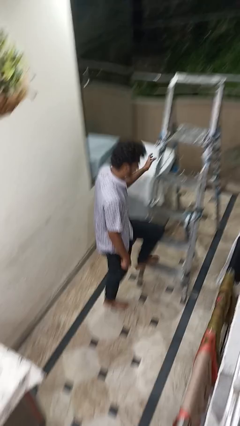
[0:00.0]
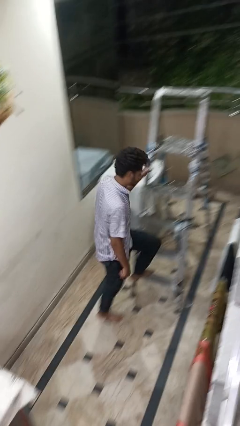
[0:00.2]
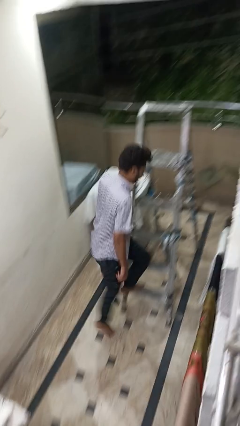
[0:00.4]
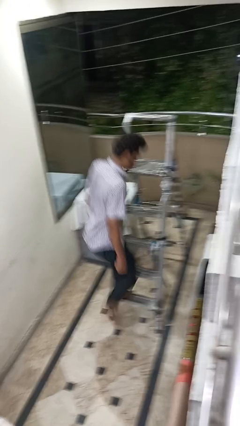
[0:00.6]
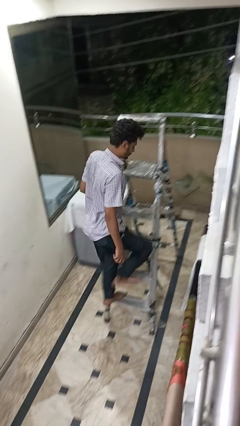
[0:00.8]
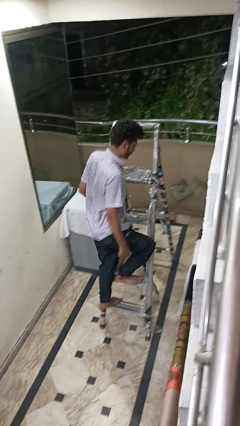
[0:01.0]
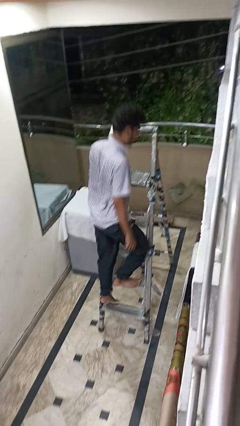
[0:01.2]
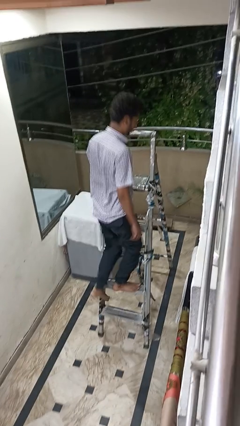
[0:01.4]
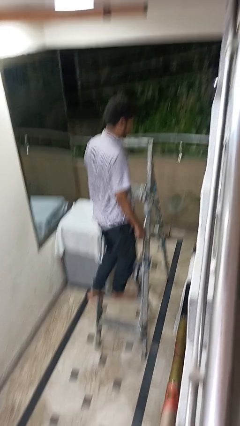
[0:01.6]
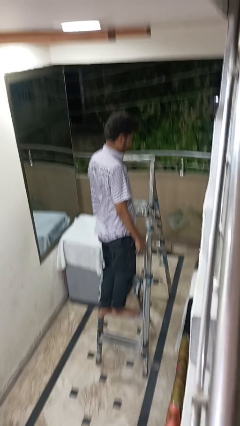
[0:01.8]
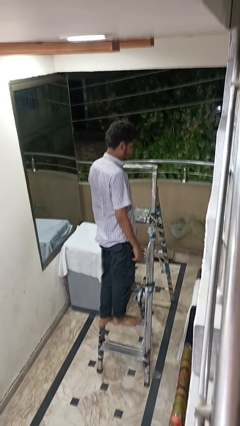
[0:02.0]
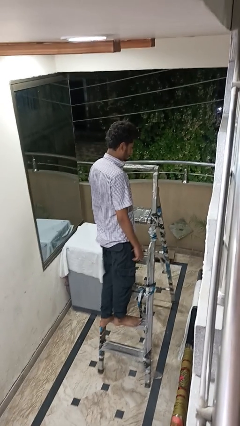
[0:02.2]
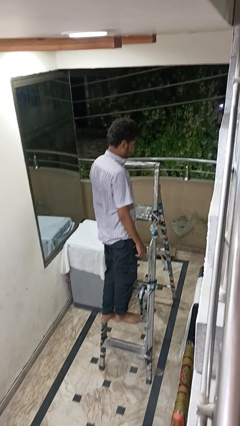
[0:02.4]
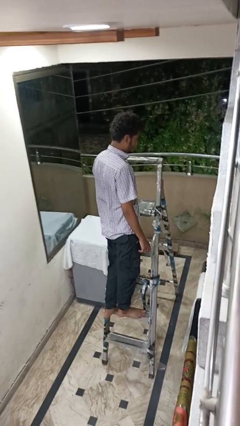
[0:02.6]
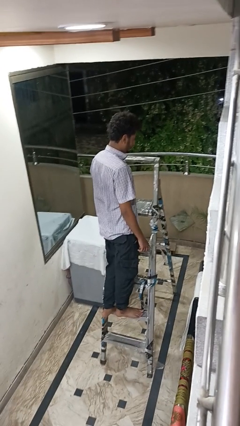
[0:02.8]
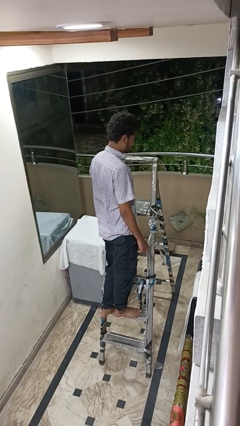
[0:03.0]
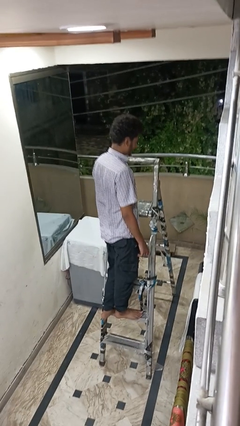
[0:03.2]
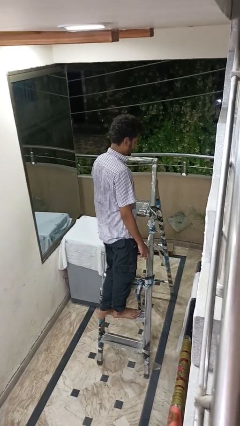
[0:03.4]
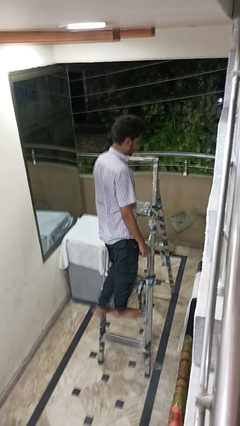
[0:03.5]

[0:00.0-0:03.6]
person climbs up ladder

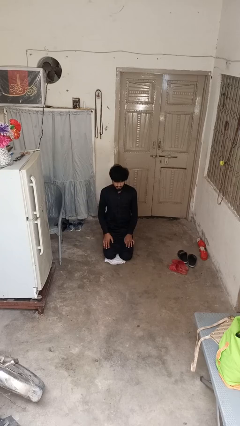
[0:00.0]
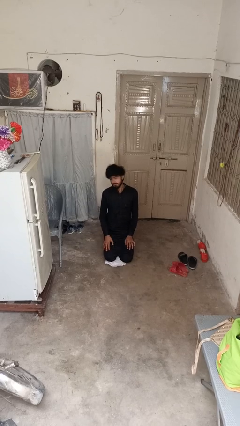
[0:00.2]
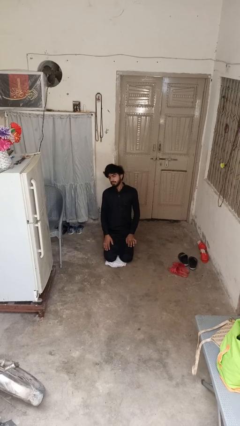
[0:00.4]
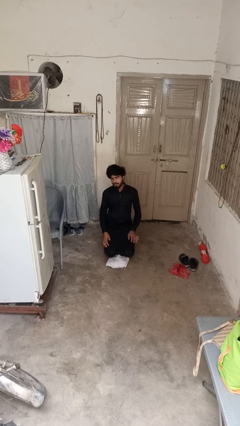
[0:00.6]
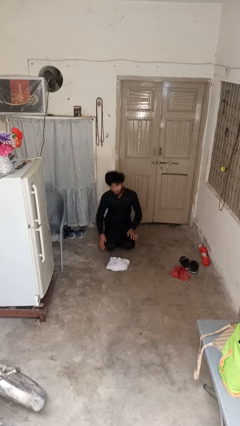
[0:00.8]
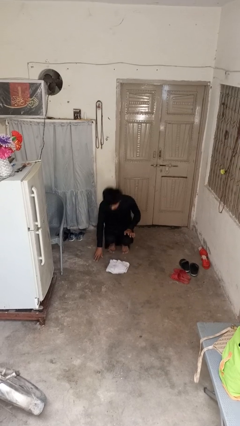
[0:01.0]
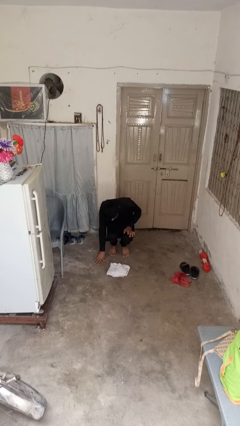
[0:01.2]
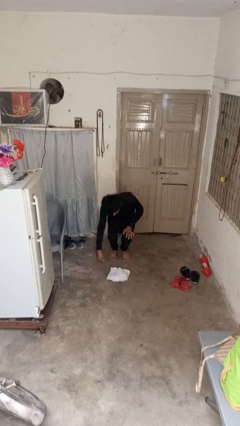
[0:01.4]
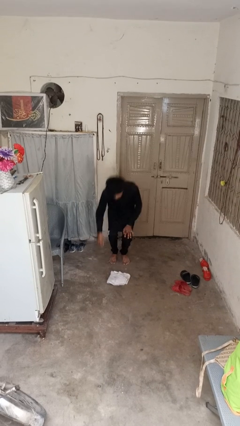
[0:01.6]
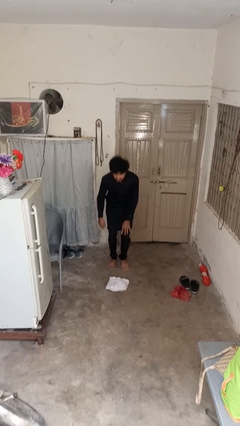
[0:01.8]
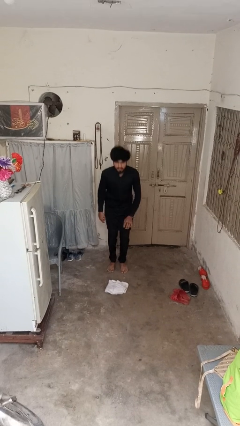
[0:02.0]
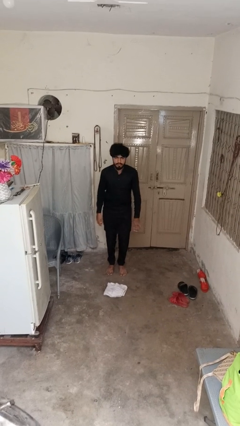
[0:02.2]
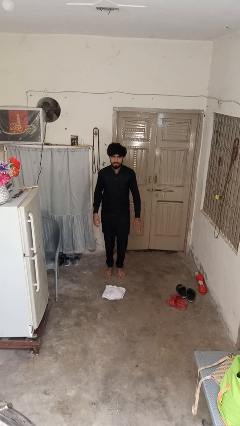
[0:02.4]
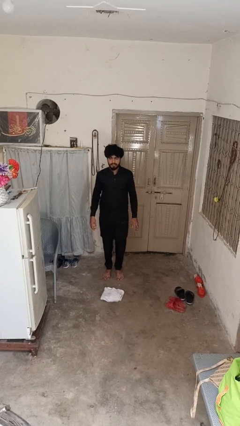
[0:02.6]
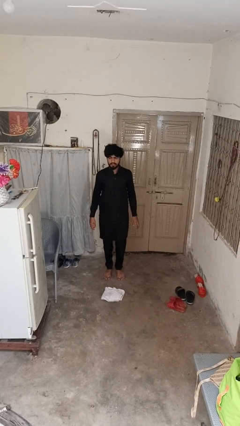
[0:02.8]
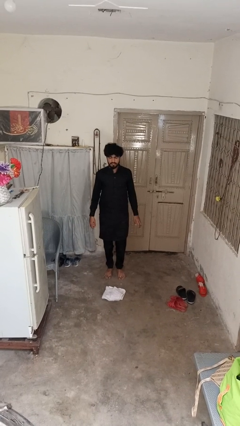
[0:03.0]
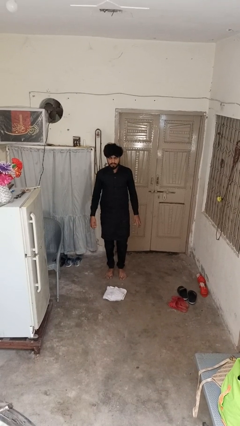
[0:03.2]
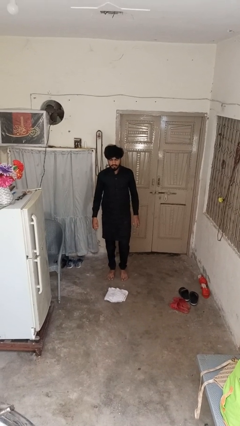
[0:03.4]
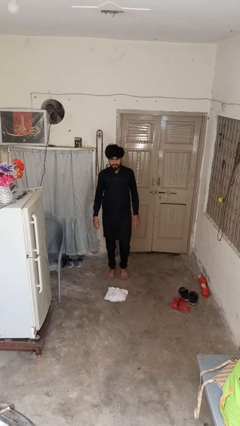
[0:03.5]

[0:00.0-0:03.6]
person stands up from floor

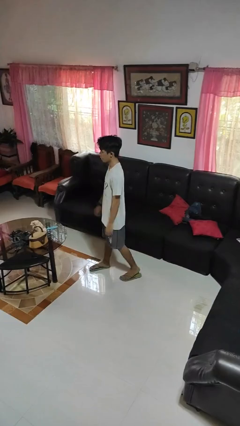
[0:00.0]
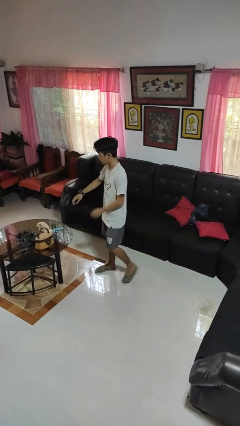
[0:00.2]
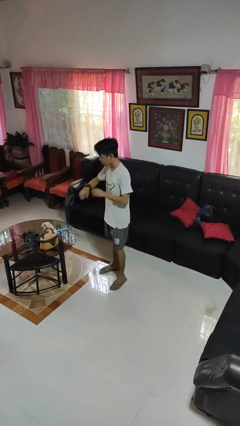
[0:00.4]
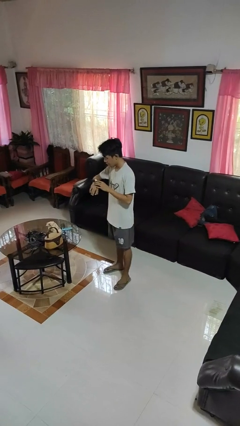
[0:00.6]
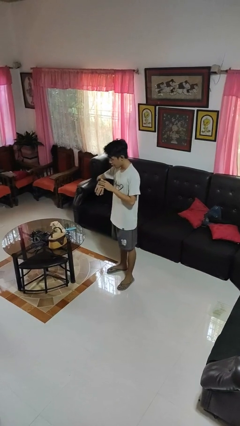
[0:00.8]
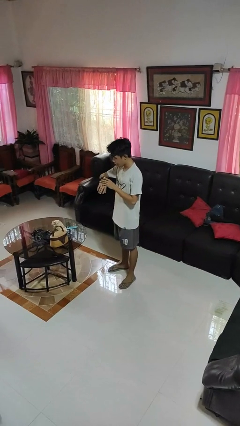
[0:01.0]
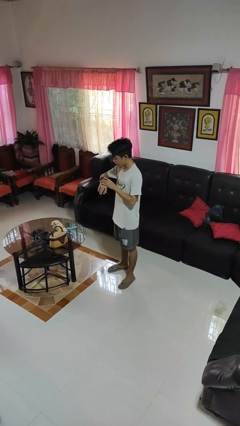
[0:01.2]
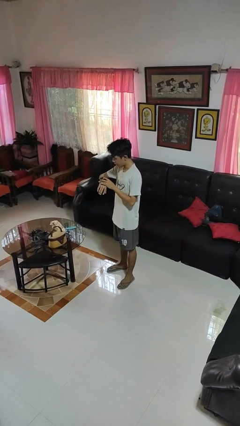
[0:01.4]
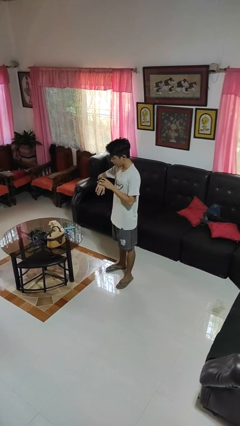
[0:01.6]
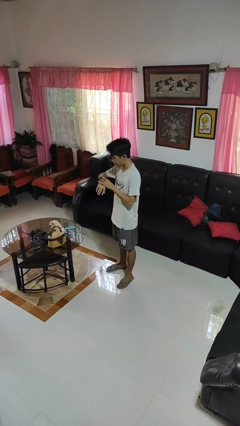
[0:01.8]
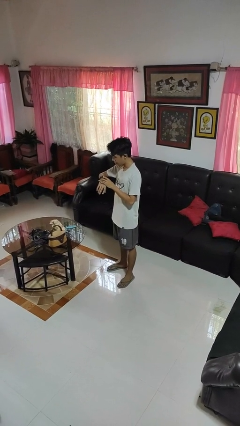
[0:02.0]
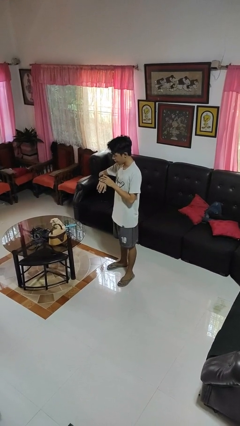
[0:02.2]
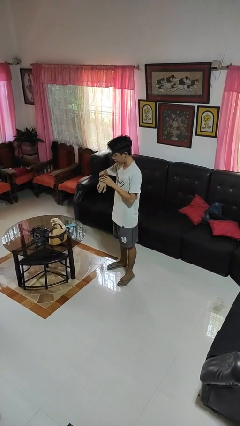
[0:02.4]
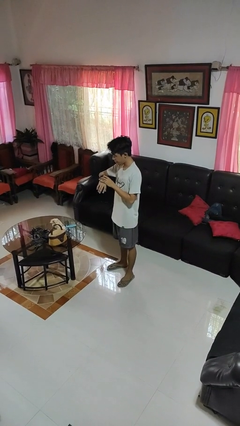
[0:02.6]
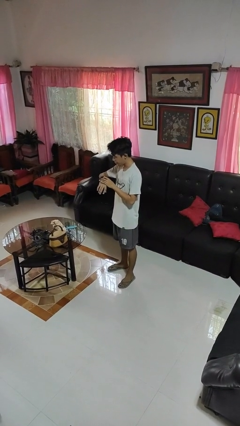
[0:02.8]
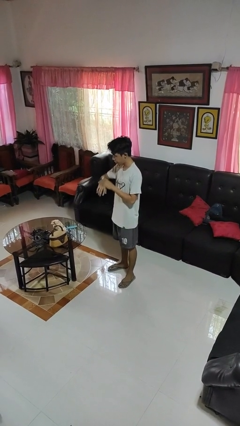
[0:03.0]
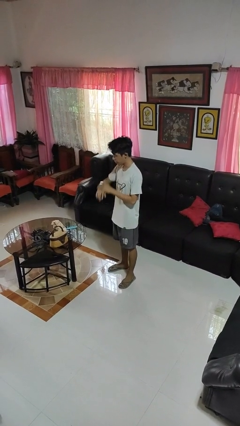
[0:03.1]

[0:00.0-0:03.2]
person looks at wristwatch

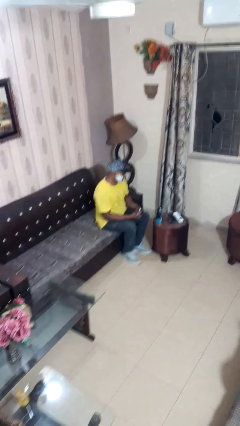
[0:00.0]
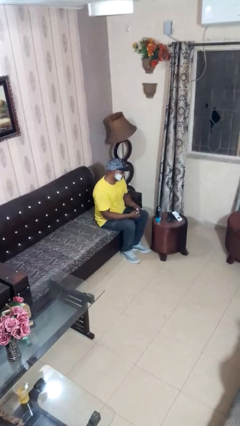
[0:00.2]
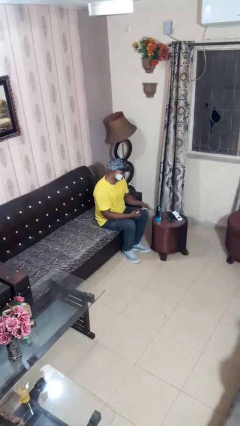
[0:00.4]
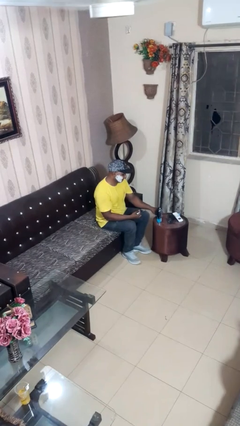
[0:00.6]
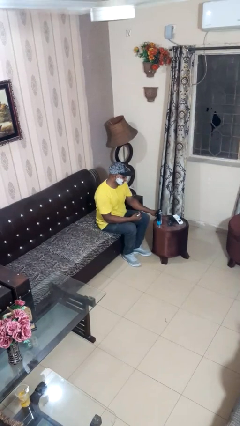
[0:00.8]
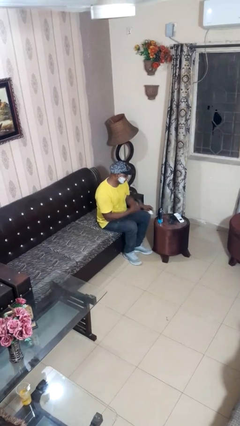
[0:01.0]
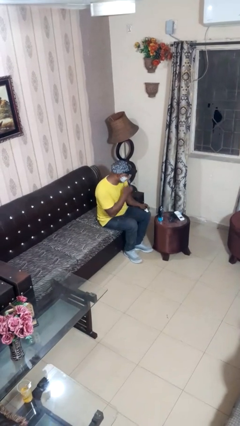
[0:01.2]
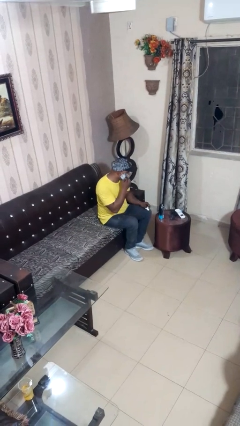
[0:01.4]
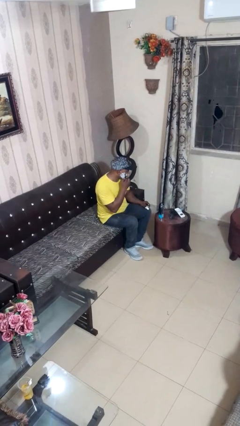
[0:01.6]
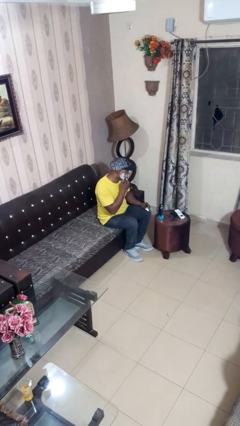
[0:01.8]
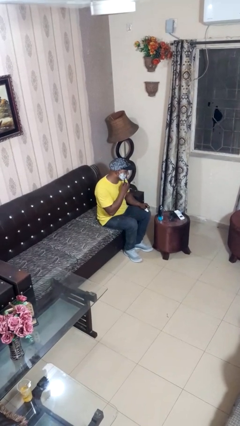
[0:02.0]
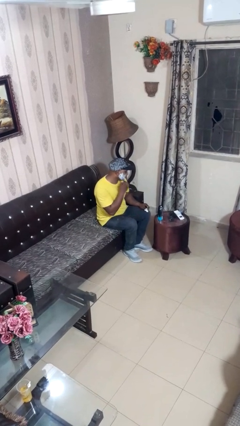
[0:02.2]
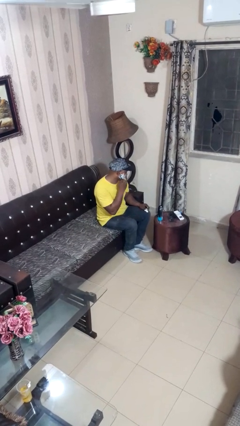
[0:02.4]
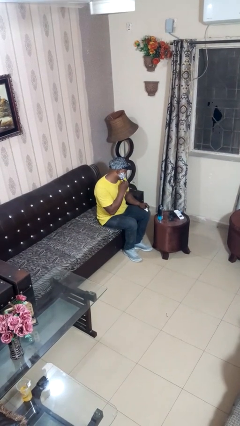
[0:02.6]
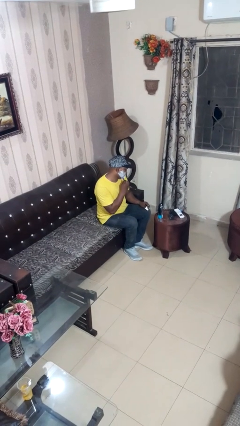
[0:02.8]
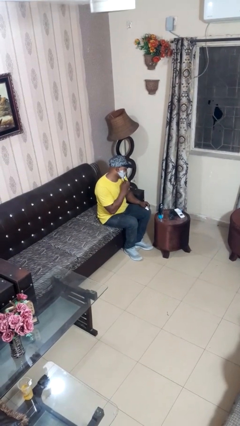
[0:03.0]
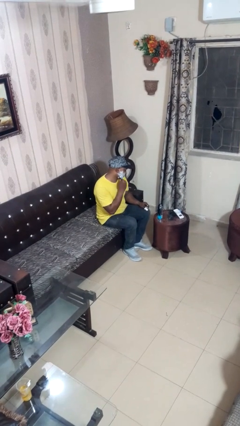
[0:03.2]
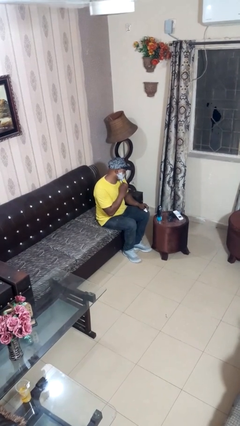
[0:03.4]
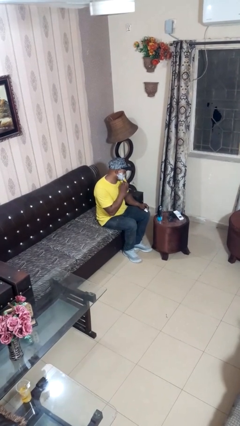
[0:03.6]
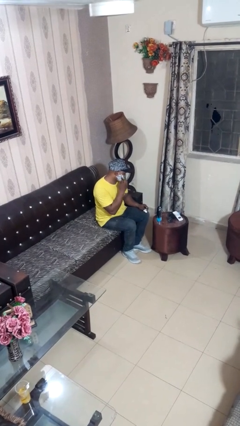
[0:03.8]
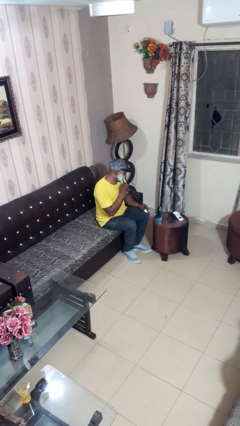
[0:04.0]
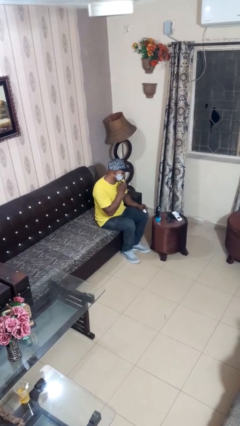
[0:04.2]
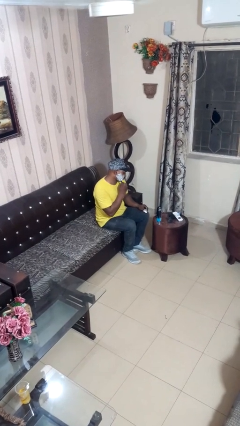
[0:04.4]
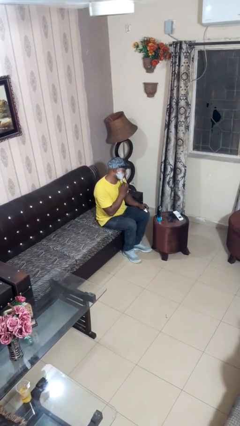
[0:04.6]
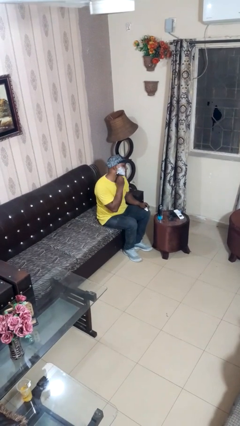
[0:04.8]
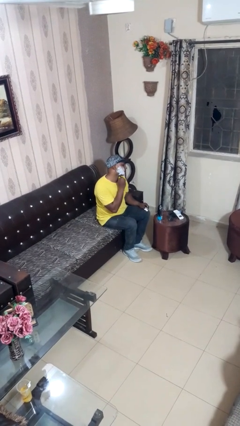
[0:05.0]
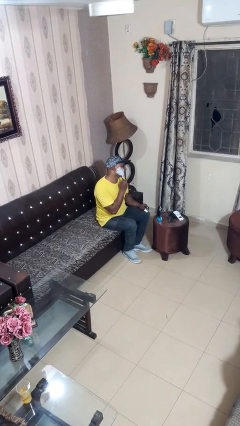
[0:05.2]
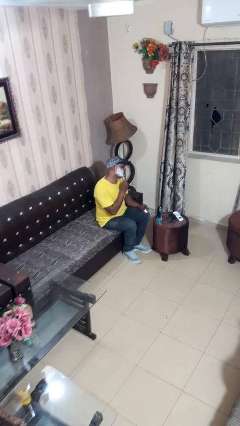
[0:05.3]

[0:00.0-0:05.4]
person shaves face

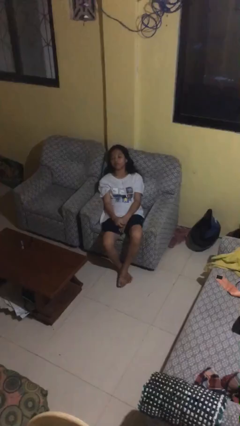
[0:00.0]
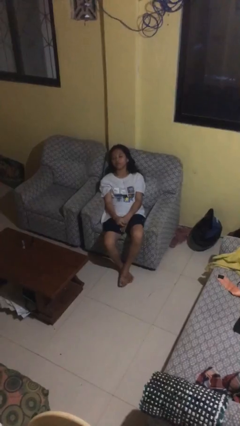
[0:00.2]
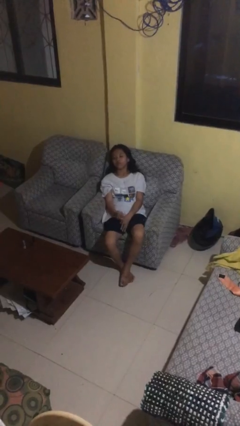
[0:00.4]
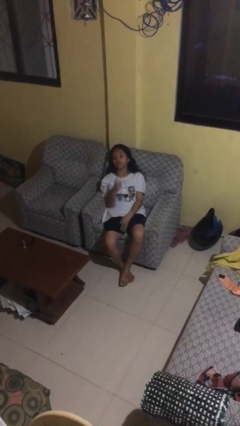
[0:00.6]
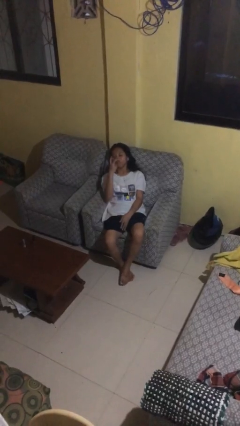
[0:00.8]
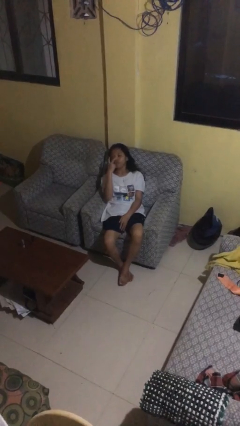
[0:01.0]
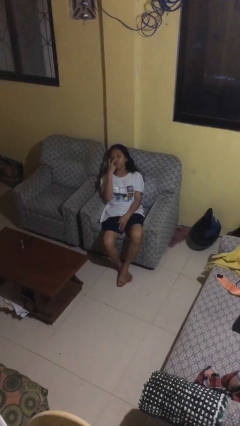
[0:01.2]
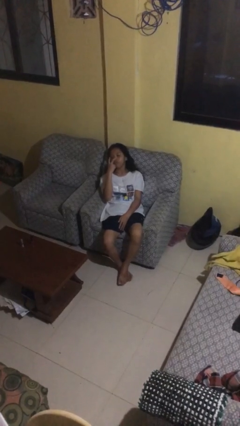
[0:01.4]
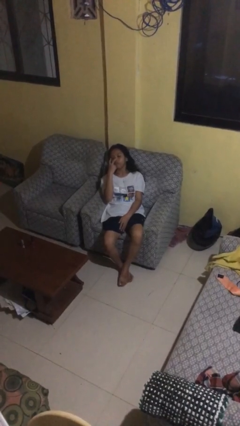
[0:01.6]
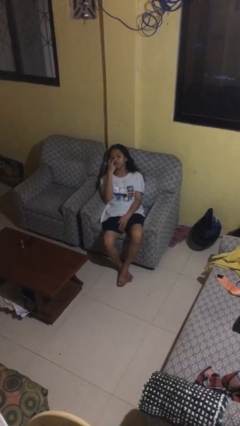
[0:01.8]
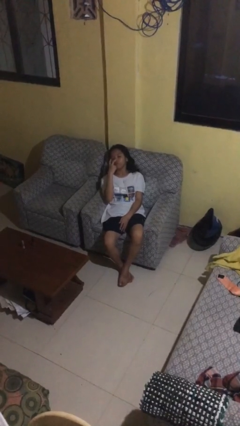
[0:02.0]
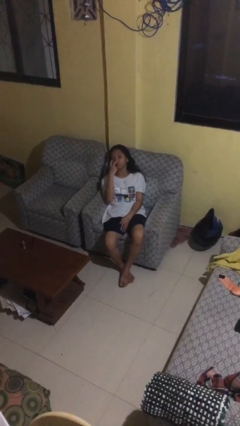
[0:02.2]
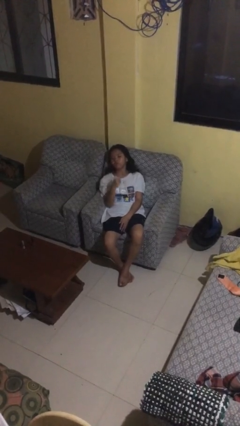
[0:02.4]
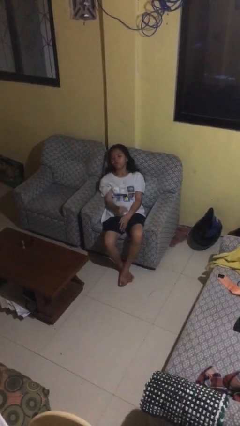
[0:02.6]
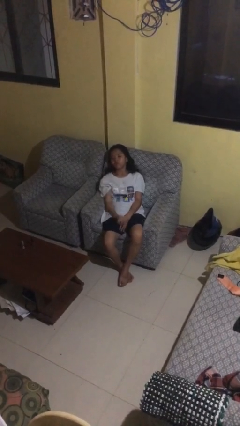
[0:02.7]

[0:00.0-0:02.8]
person gestures watch closely
